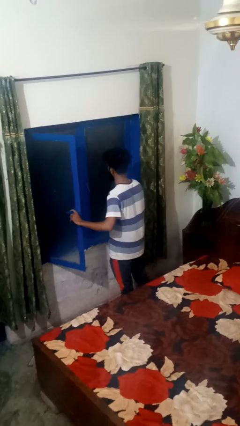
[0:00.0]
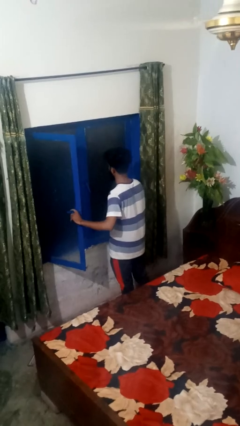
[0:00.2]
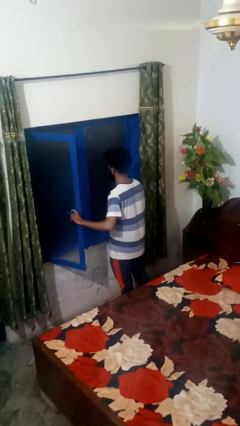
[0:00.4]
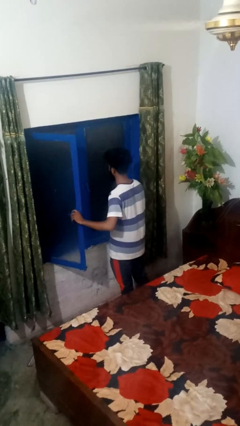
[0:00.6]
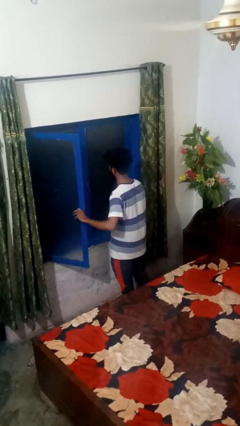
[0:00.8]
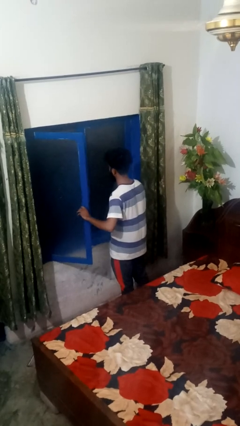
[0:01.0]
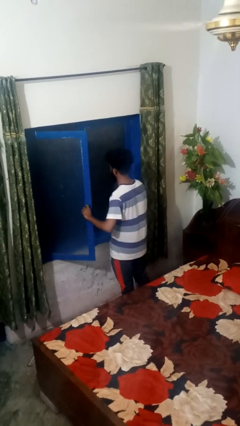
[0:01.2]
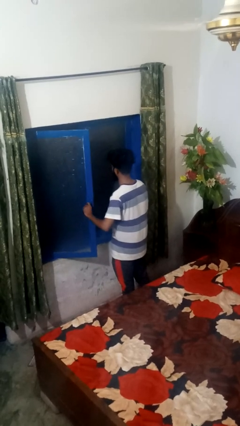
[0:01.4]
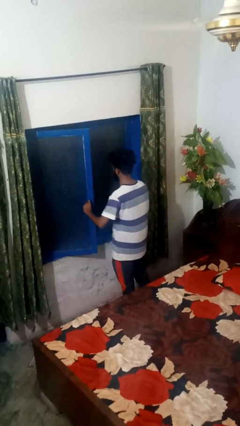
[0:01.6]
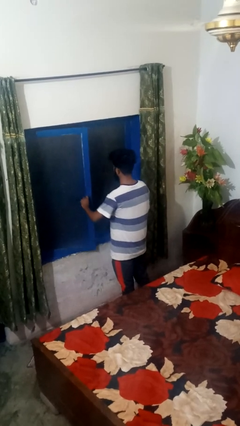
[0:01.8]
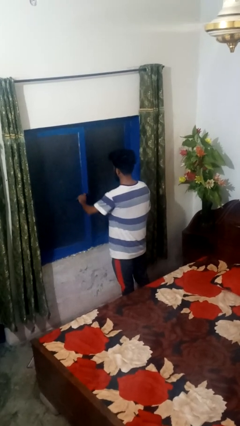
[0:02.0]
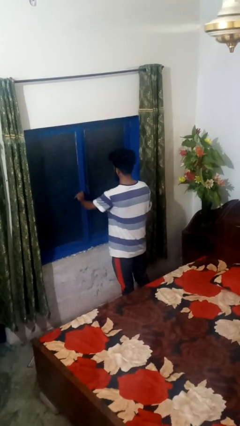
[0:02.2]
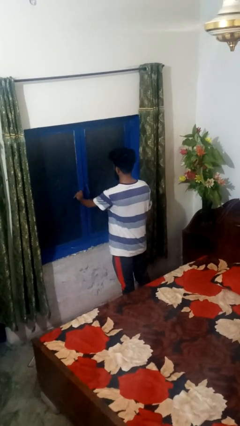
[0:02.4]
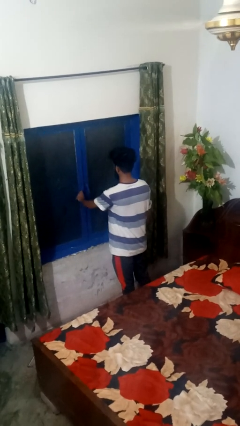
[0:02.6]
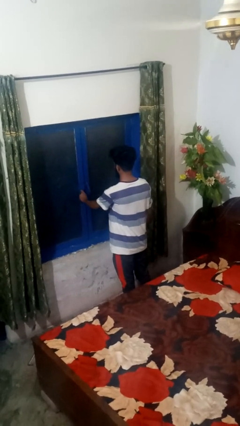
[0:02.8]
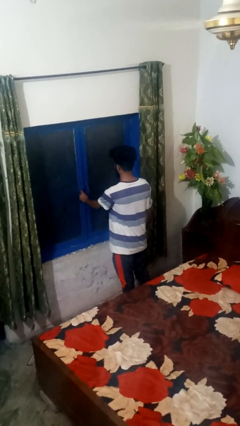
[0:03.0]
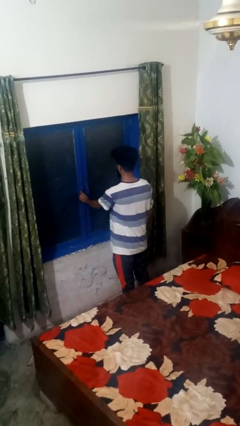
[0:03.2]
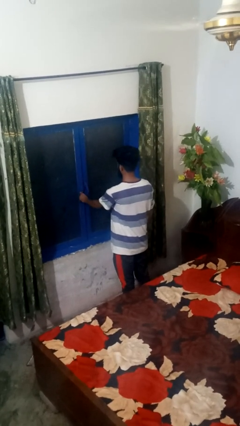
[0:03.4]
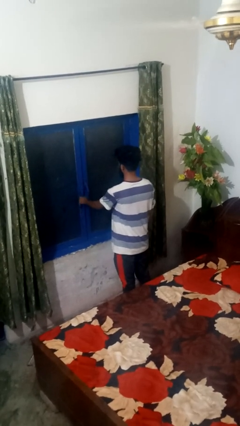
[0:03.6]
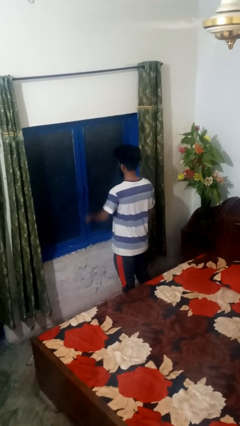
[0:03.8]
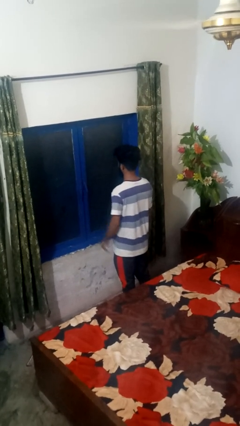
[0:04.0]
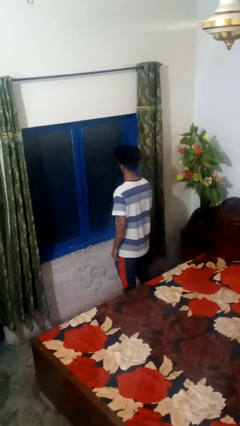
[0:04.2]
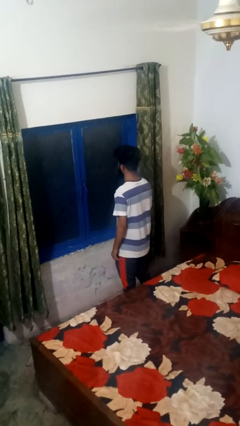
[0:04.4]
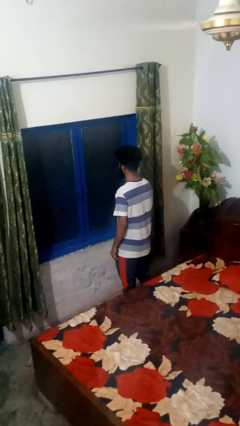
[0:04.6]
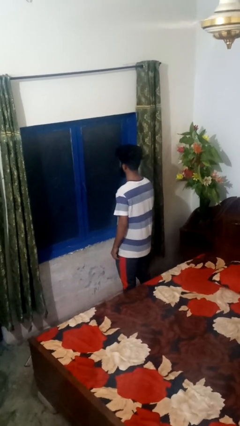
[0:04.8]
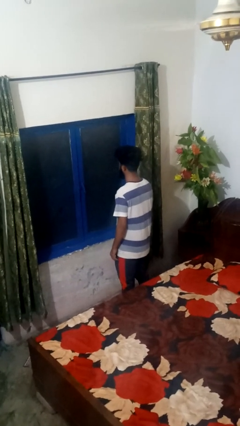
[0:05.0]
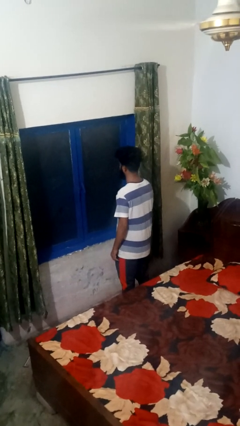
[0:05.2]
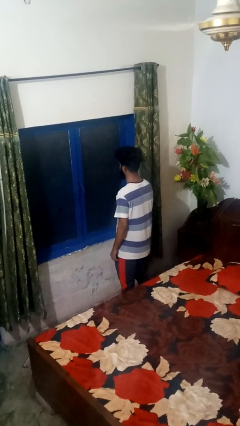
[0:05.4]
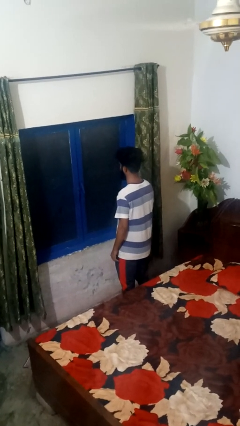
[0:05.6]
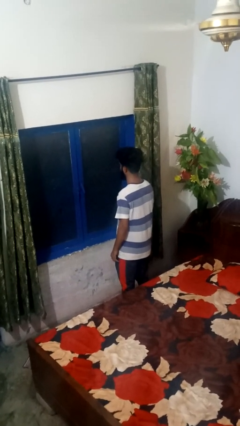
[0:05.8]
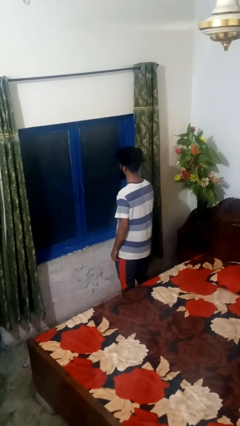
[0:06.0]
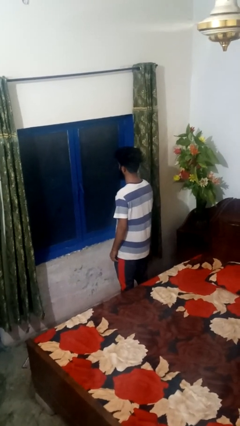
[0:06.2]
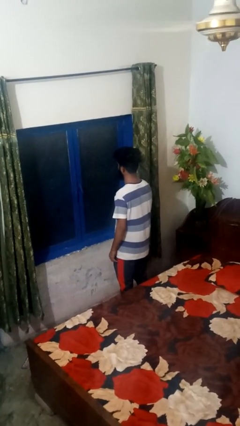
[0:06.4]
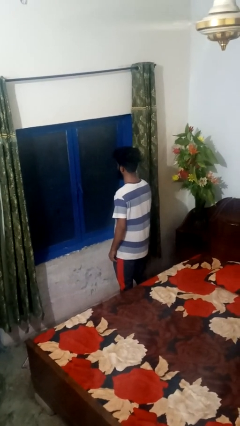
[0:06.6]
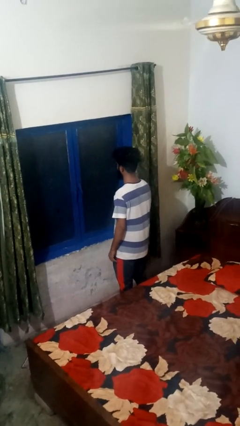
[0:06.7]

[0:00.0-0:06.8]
person closes home window

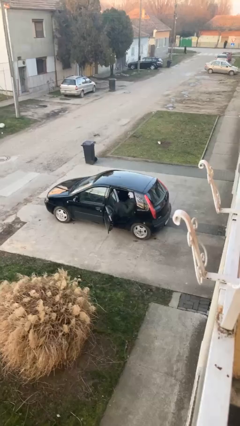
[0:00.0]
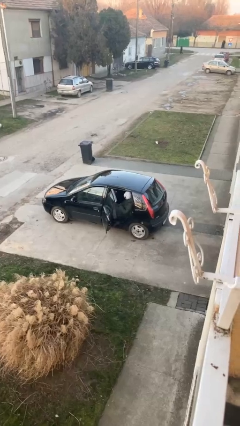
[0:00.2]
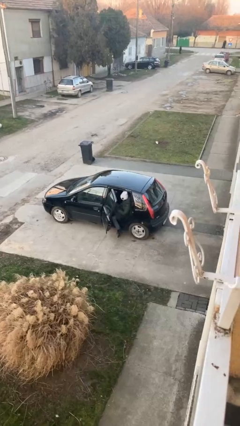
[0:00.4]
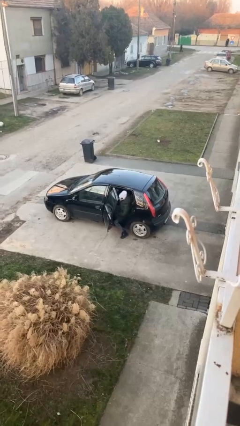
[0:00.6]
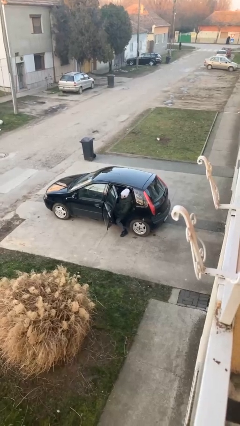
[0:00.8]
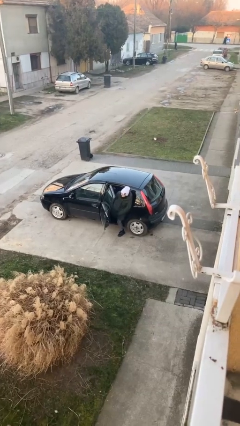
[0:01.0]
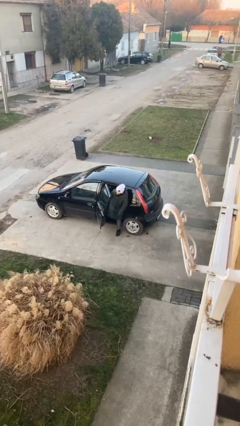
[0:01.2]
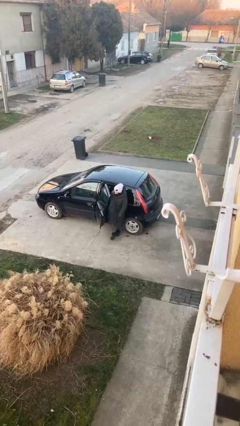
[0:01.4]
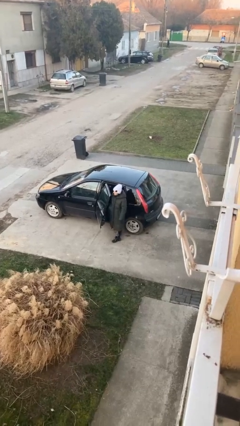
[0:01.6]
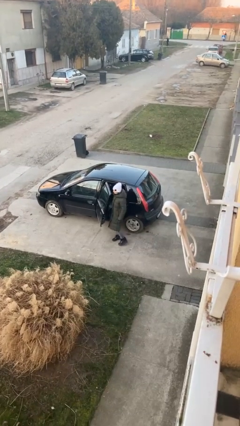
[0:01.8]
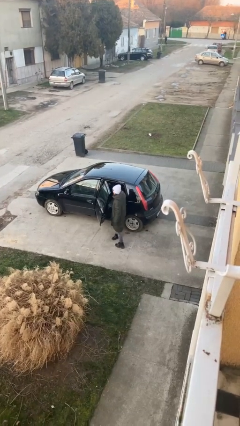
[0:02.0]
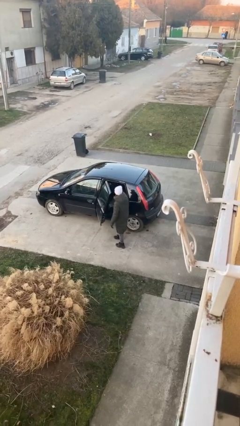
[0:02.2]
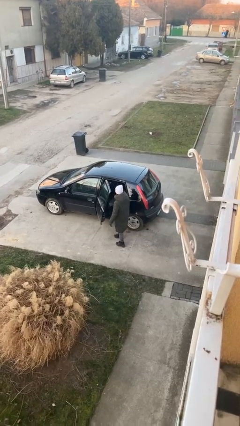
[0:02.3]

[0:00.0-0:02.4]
person exits car

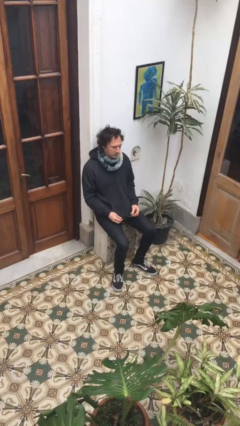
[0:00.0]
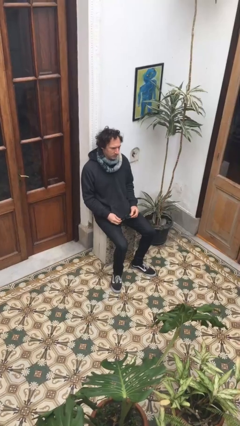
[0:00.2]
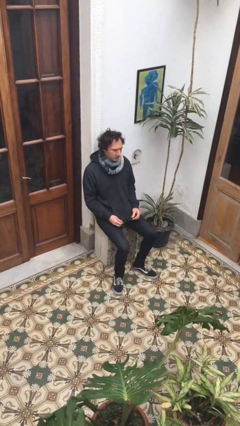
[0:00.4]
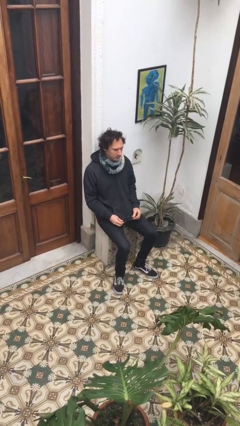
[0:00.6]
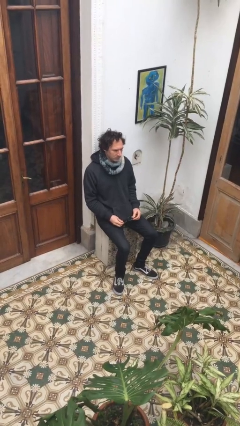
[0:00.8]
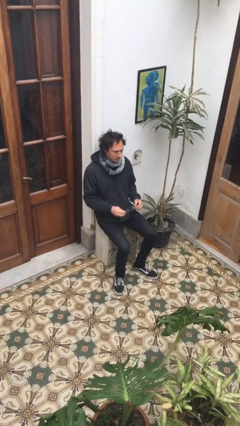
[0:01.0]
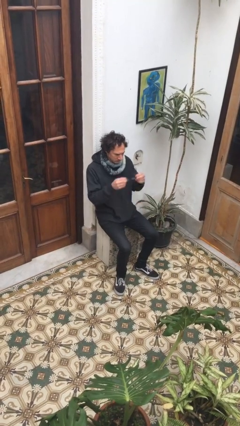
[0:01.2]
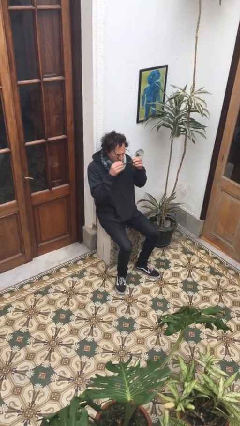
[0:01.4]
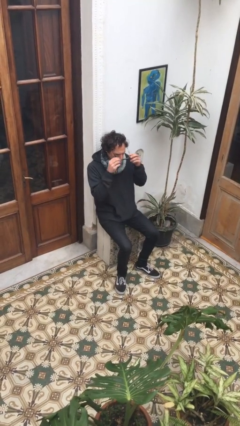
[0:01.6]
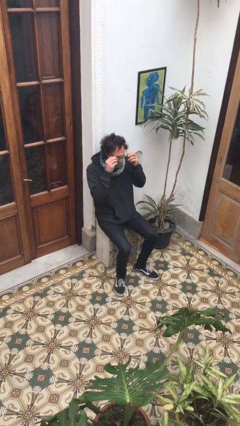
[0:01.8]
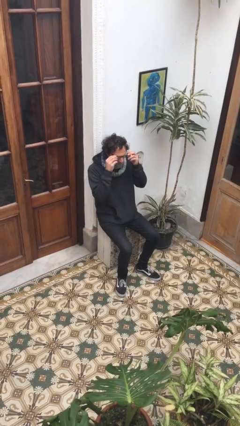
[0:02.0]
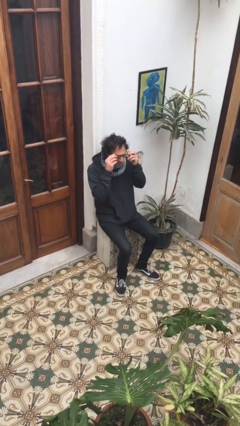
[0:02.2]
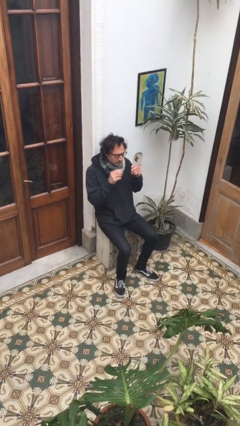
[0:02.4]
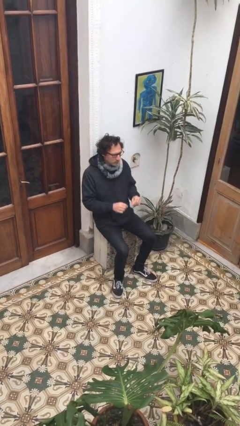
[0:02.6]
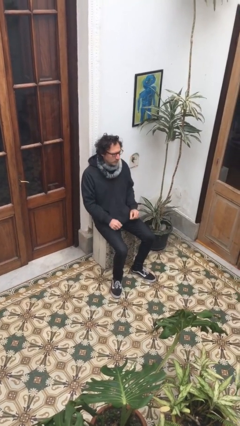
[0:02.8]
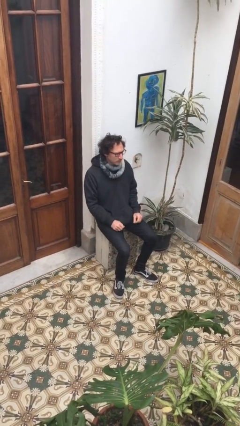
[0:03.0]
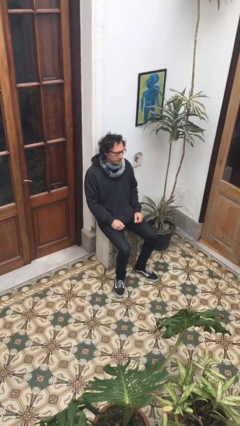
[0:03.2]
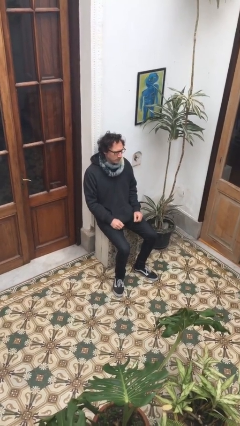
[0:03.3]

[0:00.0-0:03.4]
person puts on glasses

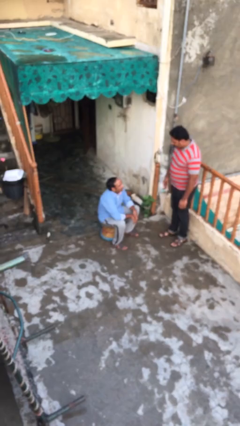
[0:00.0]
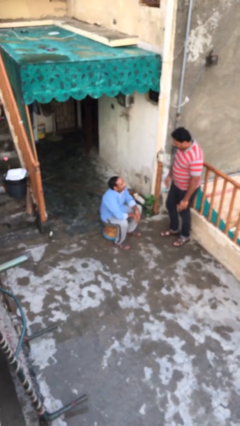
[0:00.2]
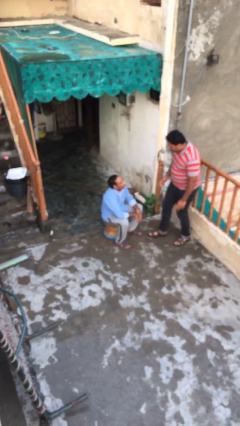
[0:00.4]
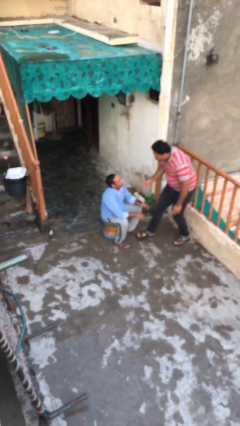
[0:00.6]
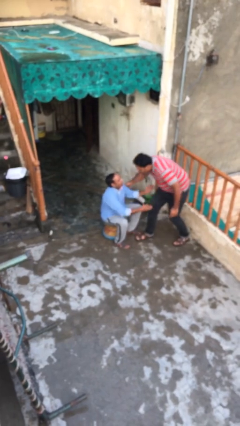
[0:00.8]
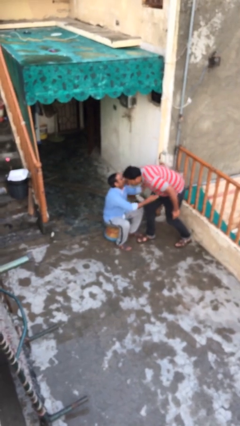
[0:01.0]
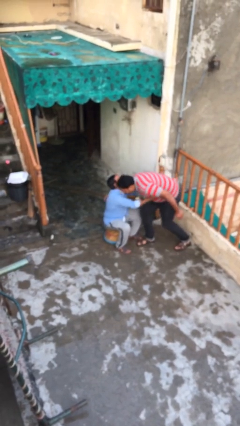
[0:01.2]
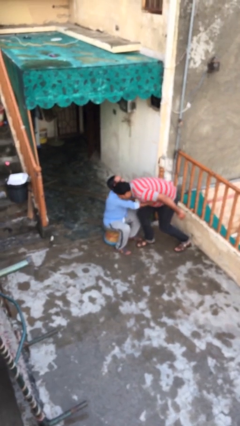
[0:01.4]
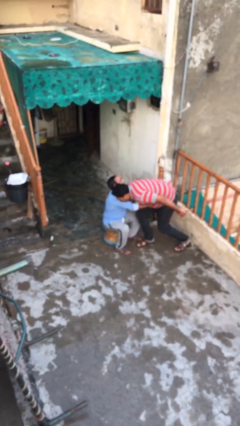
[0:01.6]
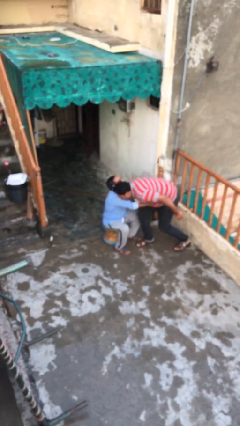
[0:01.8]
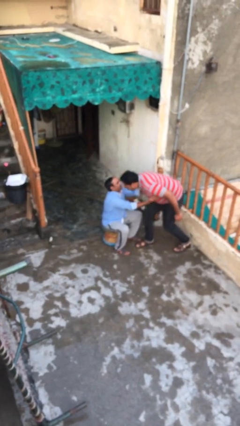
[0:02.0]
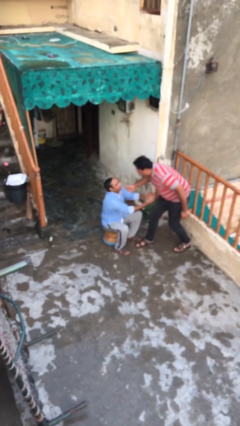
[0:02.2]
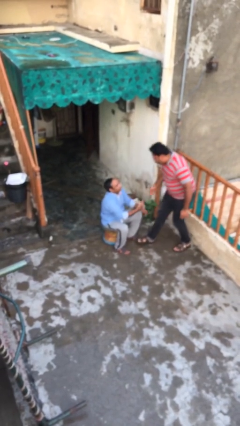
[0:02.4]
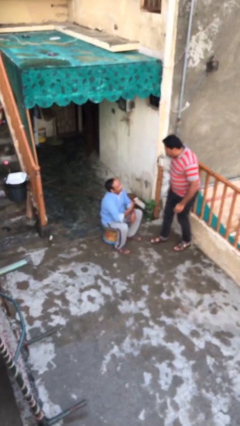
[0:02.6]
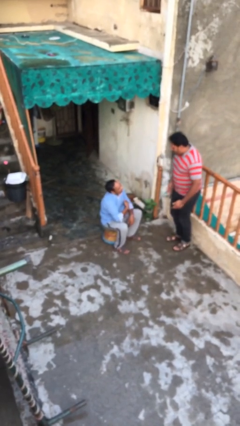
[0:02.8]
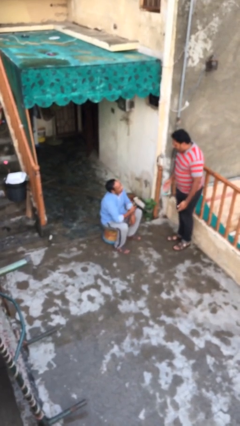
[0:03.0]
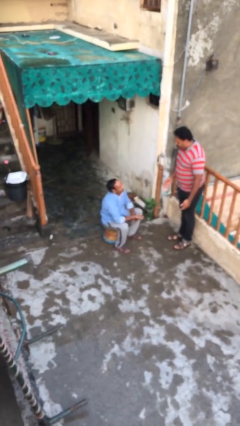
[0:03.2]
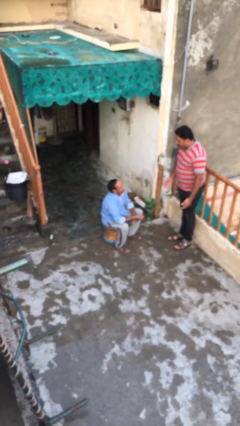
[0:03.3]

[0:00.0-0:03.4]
person embraces person

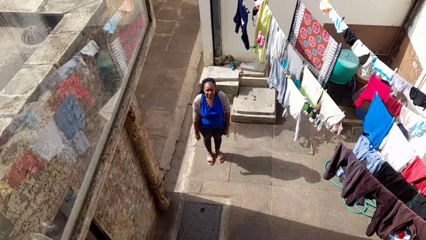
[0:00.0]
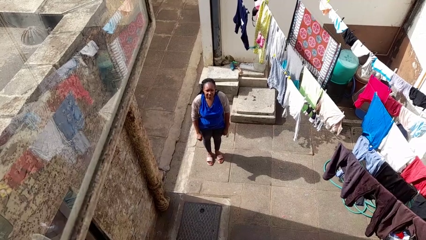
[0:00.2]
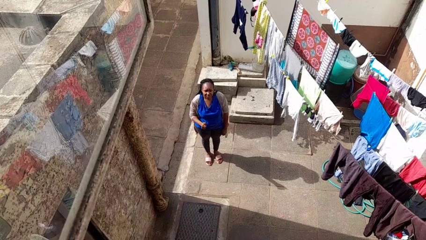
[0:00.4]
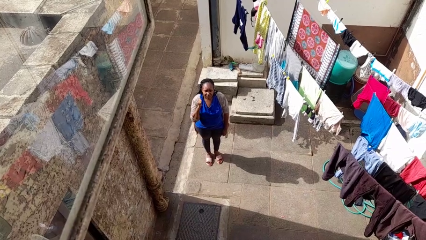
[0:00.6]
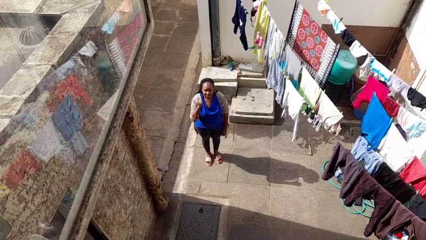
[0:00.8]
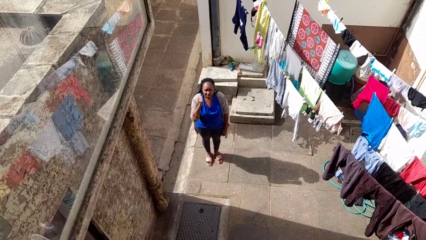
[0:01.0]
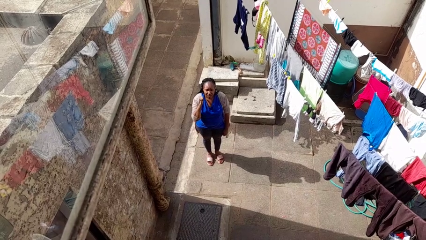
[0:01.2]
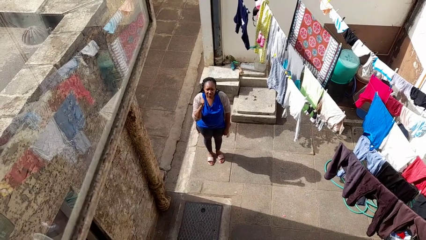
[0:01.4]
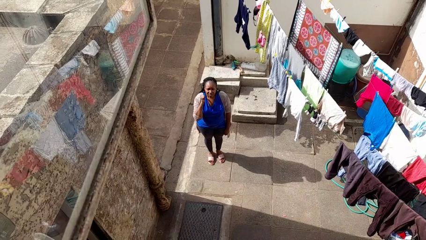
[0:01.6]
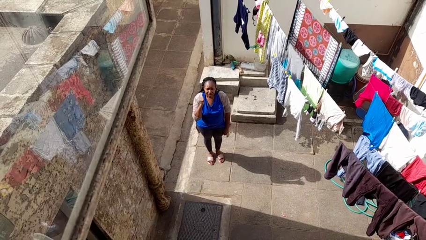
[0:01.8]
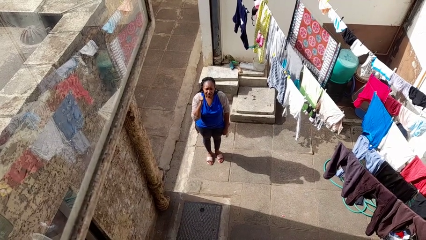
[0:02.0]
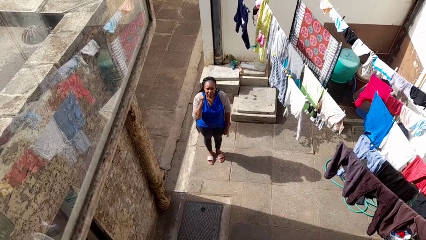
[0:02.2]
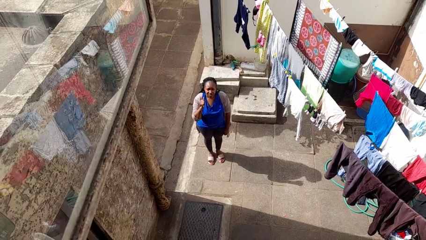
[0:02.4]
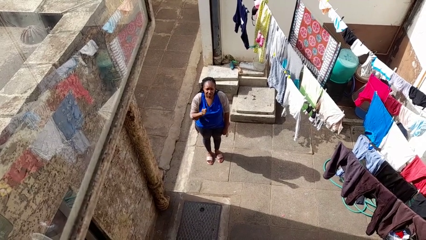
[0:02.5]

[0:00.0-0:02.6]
person gestures behind me
